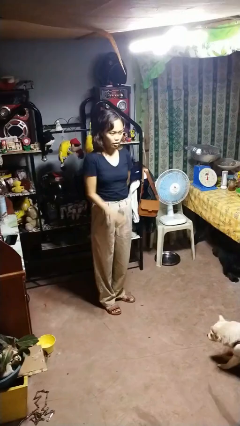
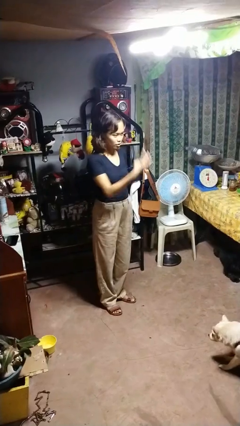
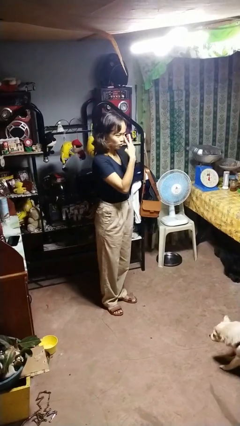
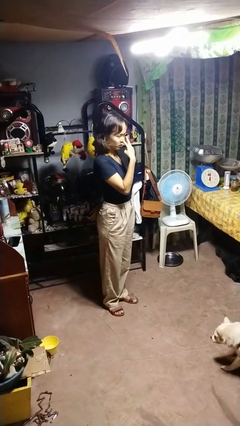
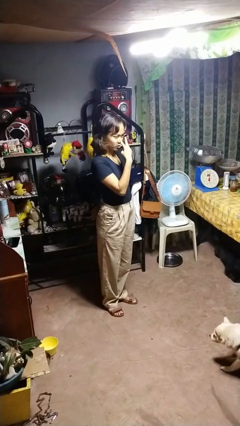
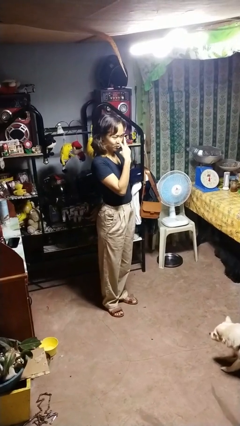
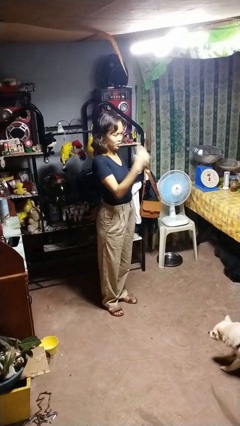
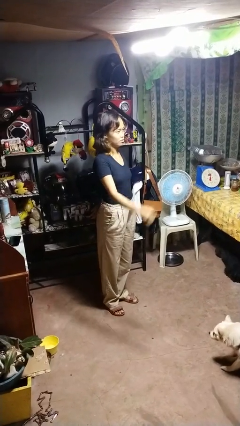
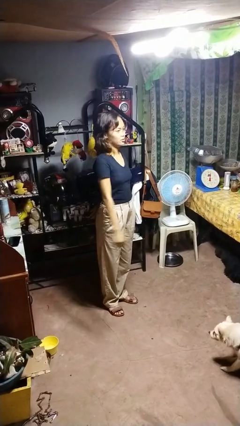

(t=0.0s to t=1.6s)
person gestures watch closely

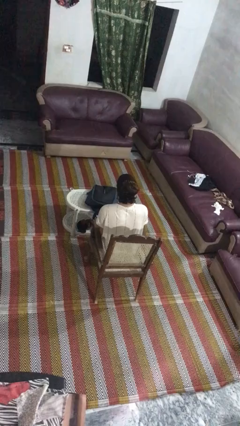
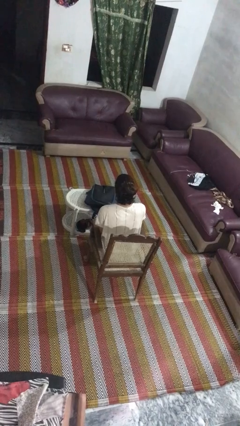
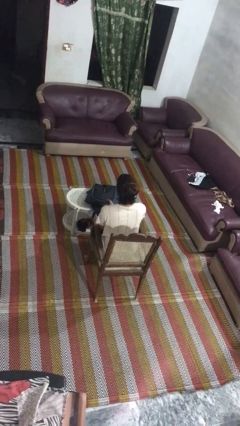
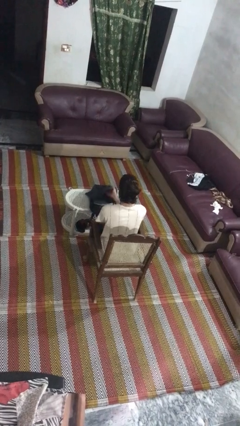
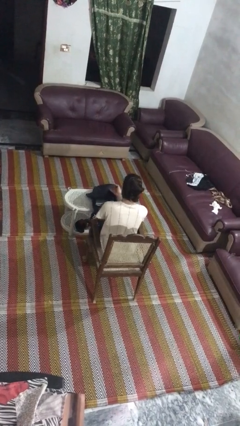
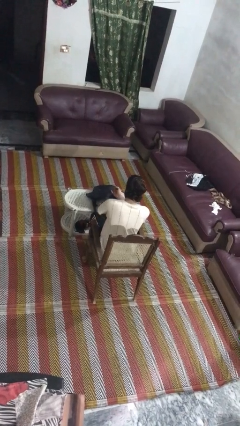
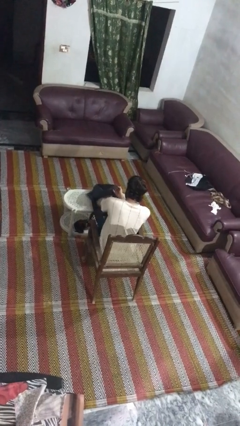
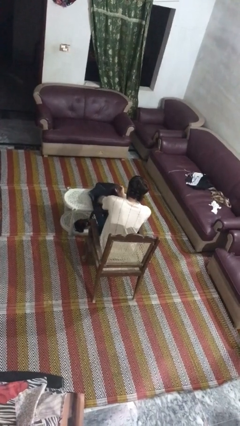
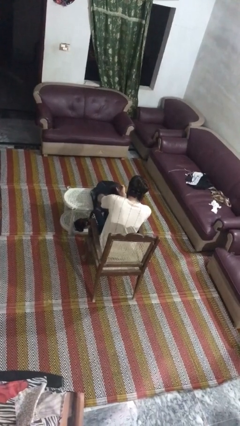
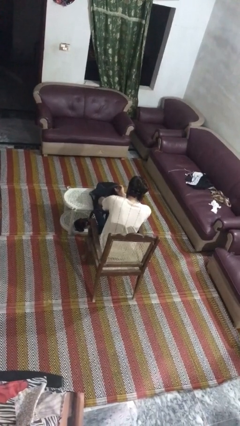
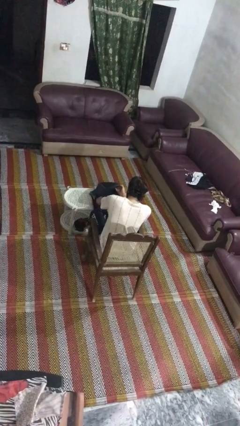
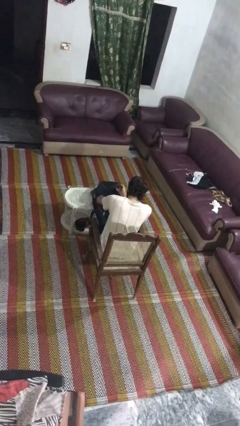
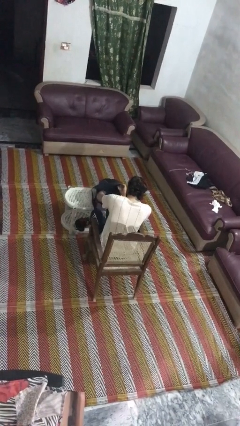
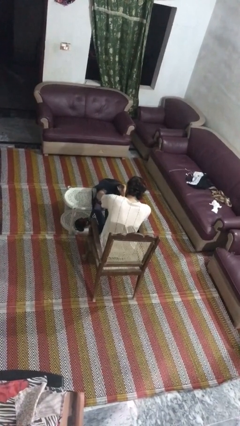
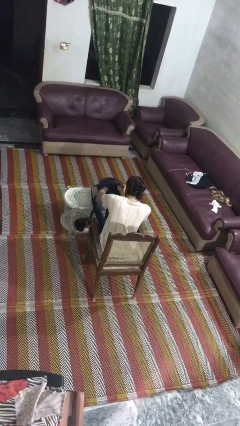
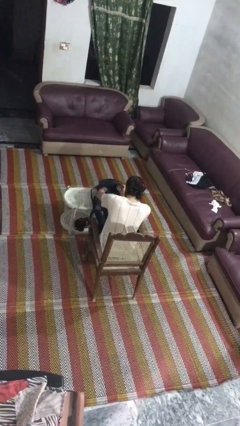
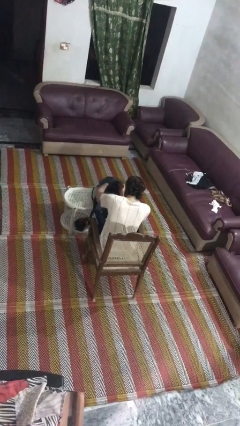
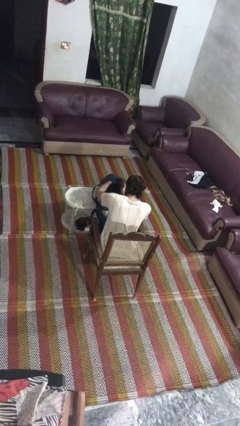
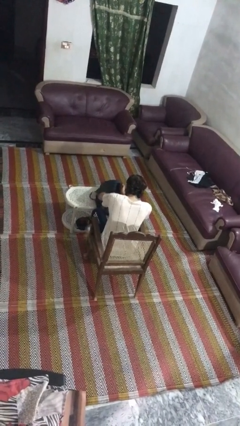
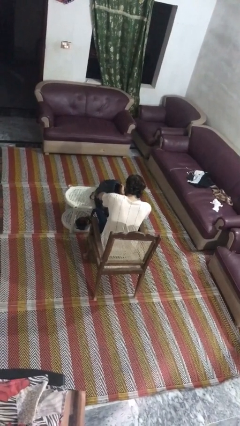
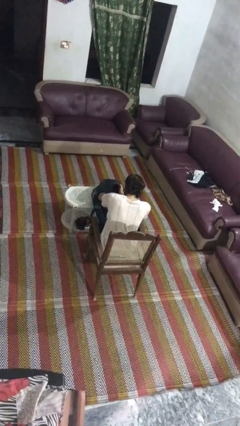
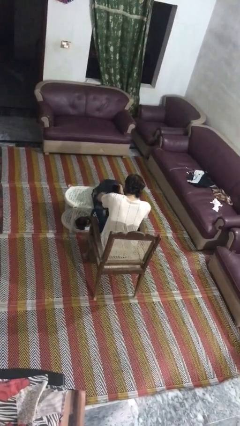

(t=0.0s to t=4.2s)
person searches in backpack

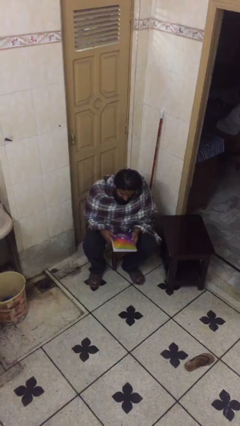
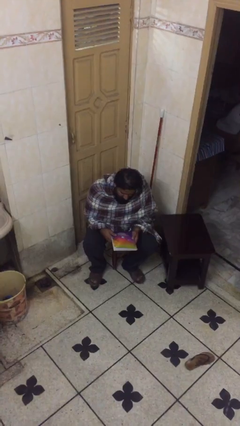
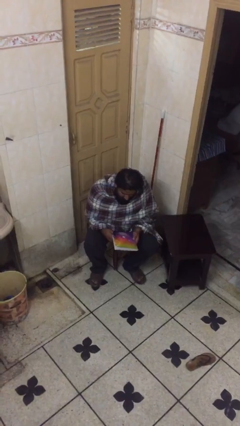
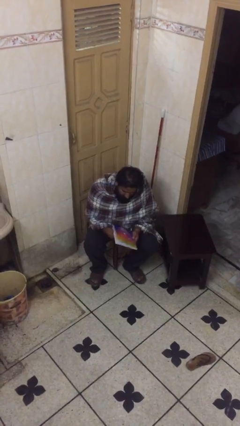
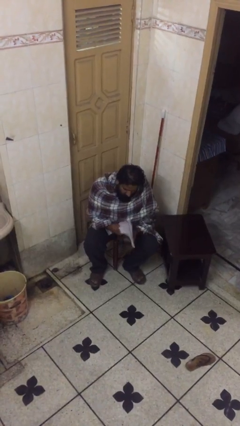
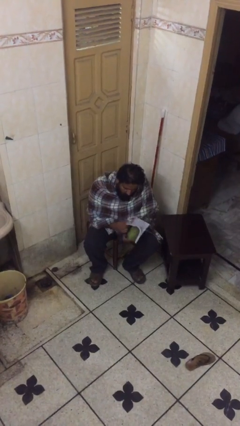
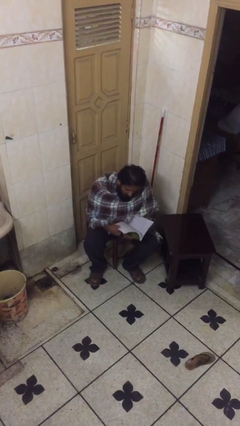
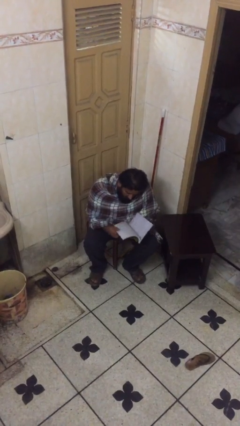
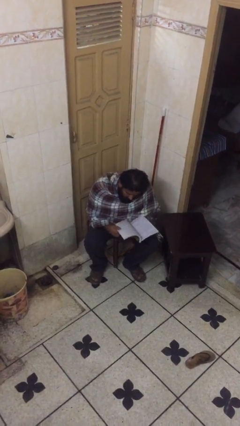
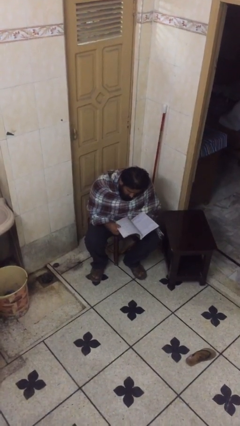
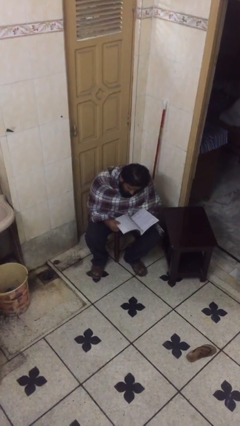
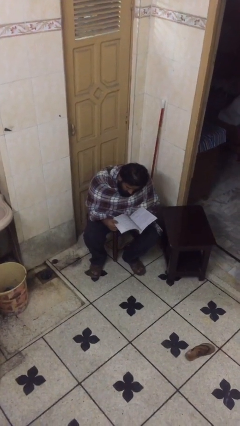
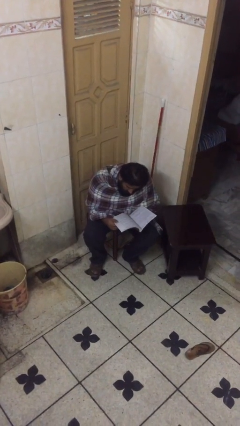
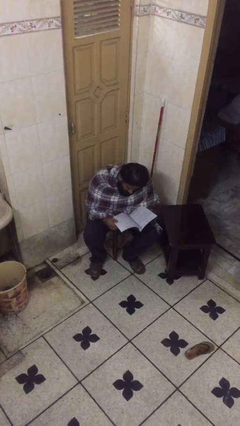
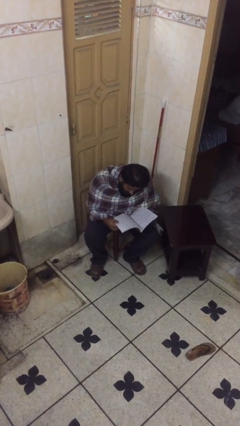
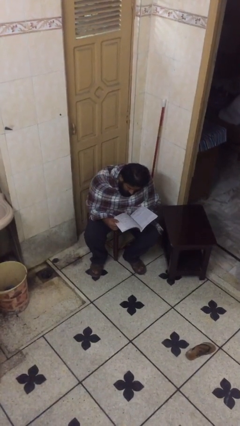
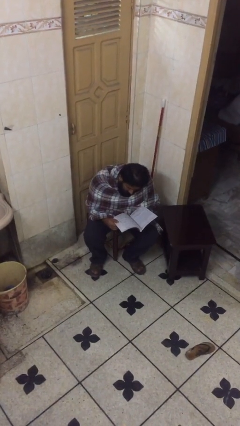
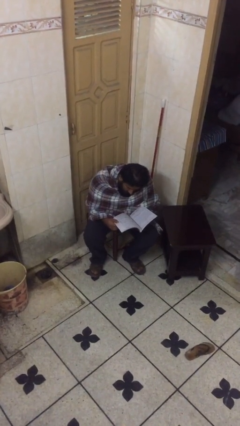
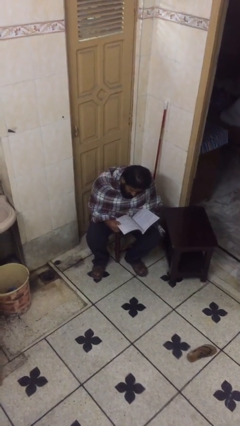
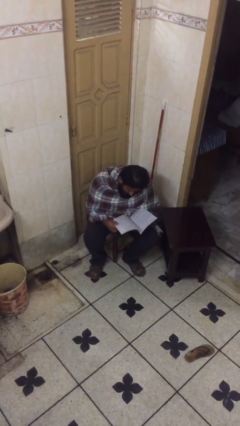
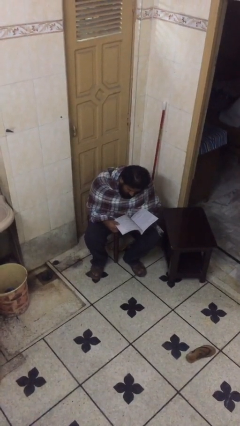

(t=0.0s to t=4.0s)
person reads document

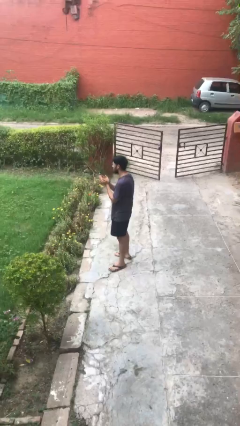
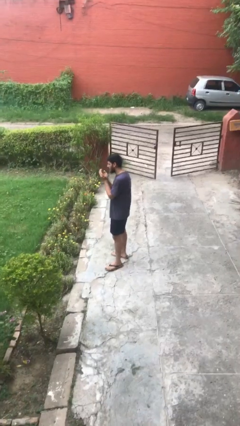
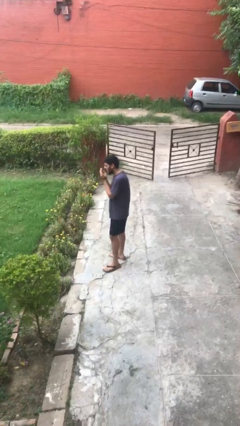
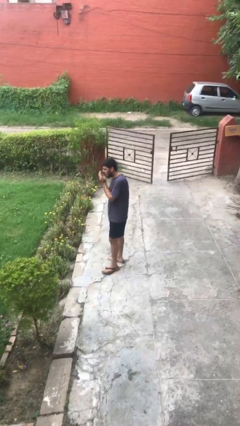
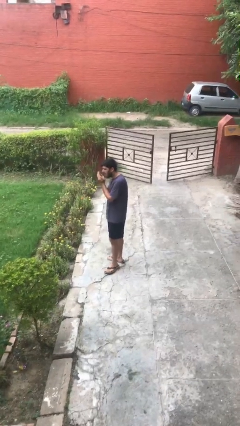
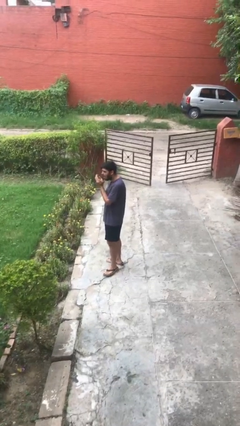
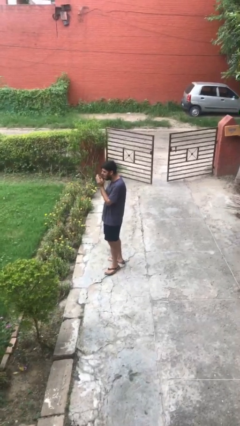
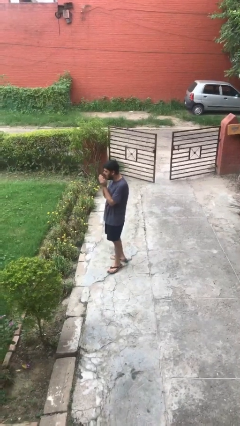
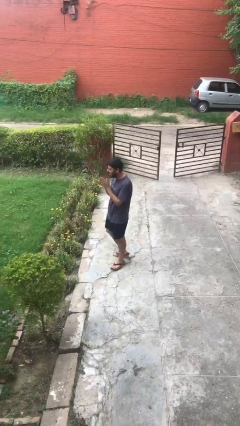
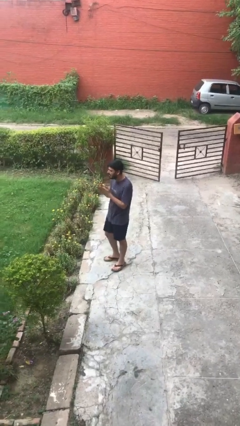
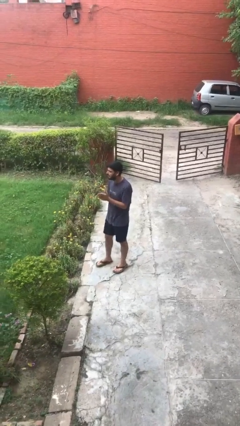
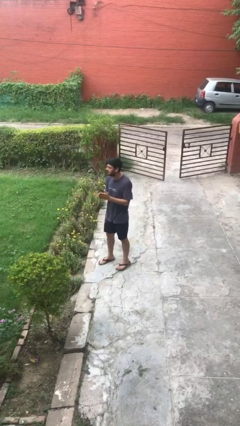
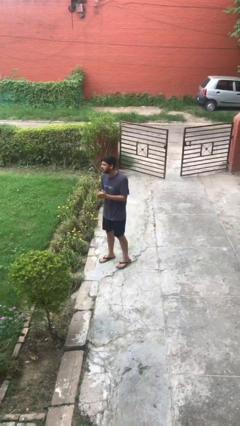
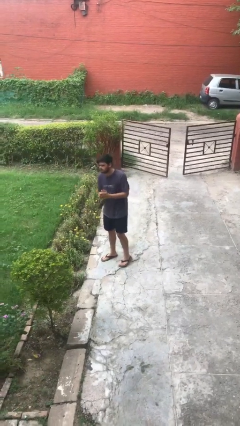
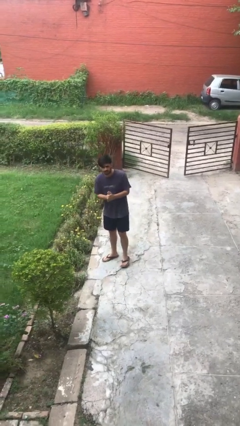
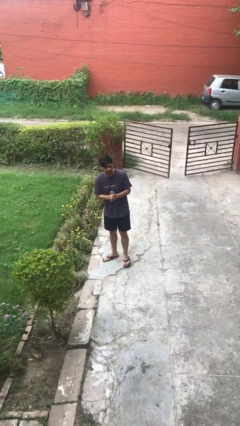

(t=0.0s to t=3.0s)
person blows into hands

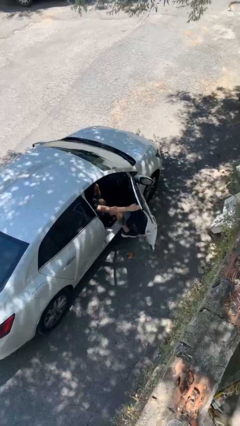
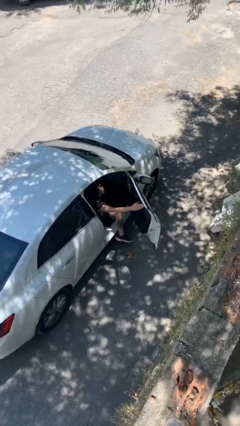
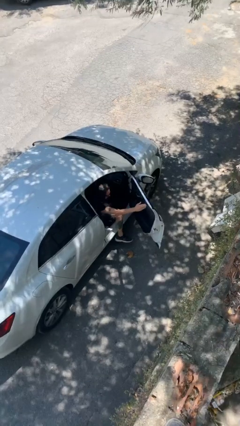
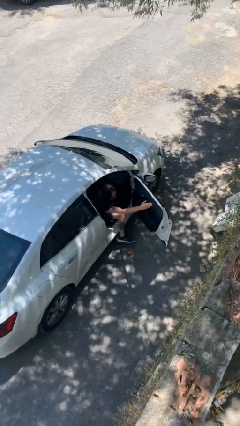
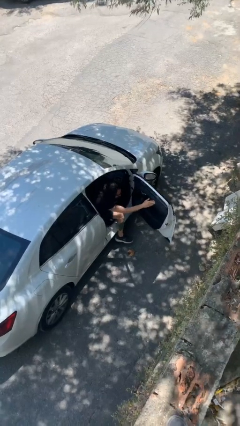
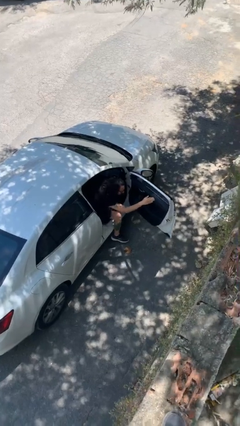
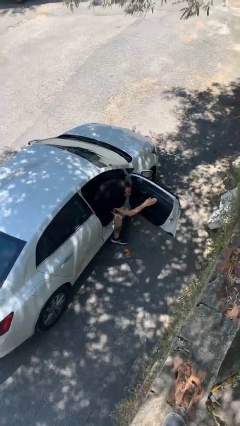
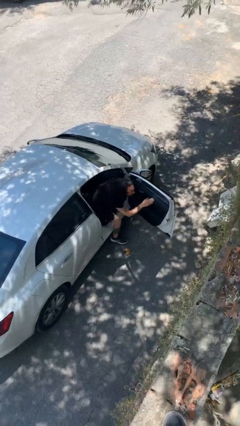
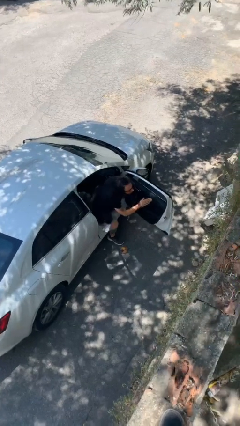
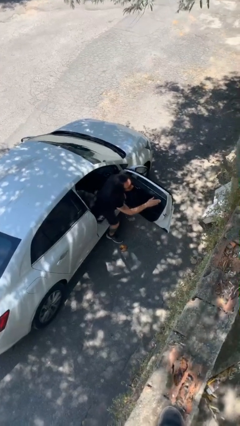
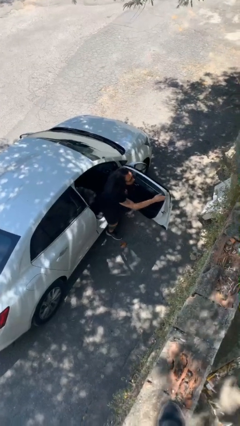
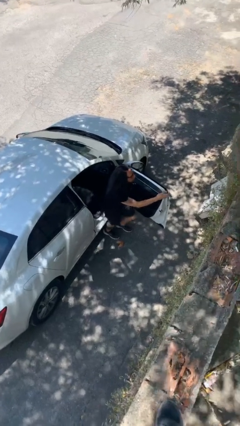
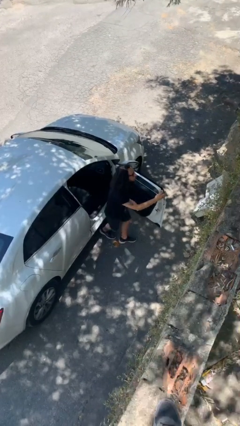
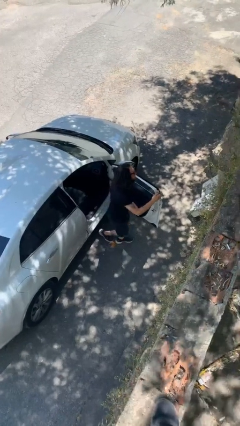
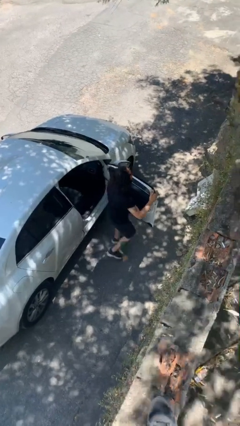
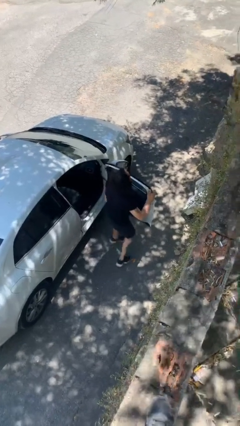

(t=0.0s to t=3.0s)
person exits car

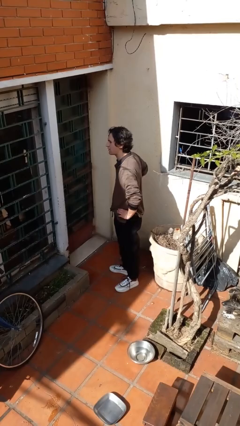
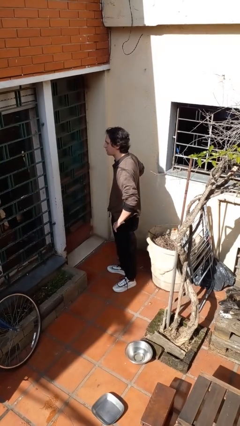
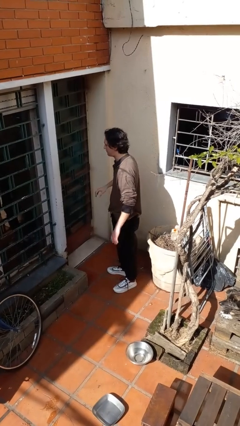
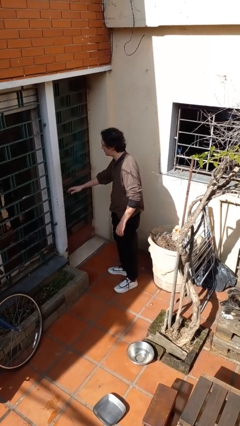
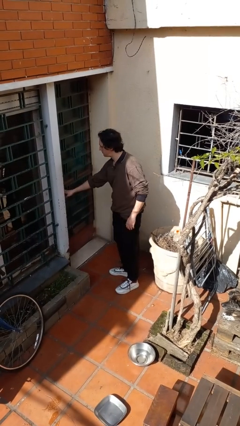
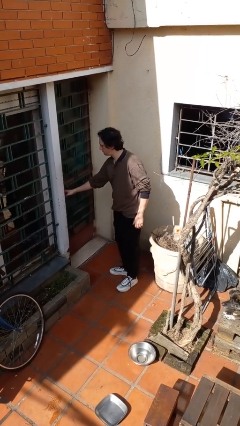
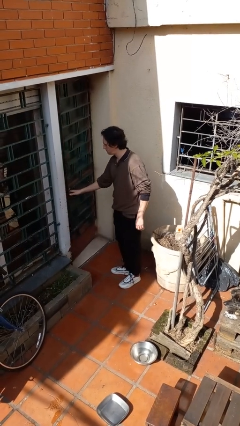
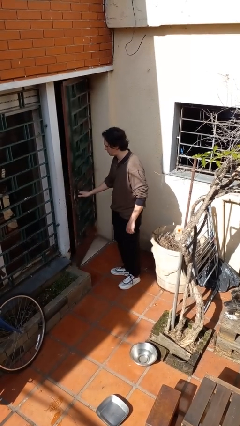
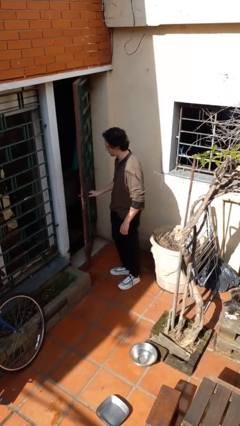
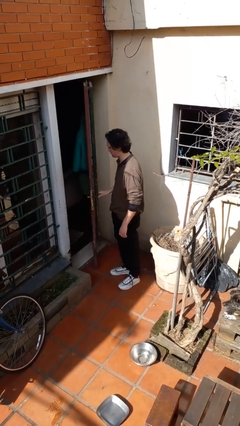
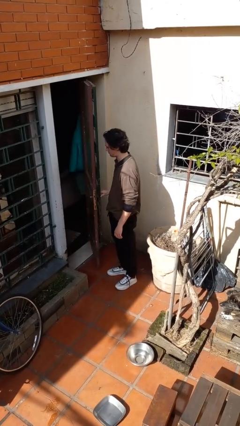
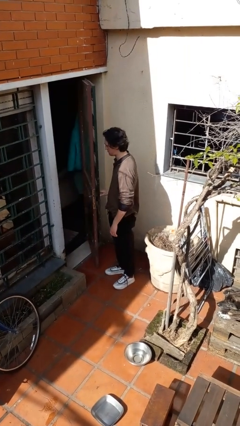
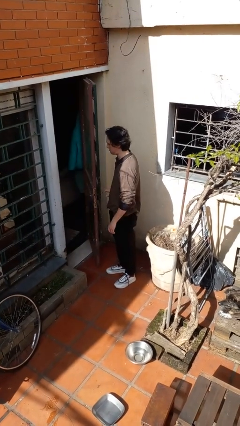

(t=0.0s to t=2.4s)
person opens facility door
